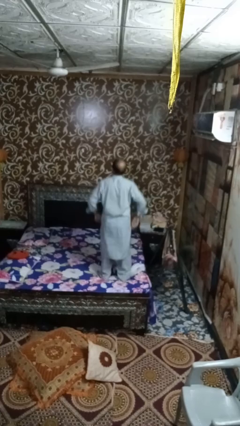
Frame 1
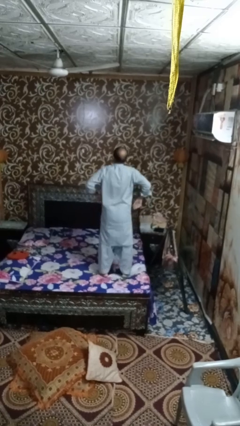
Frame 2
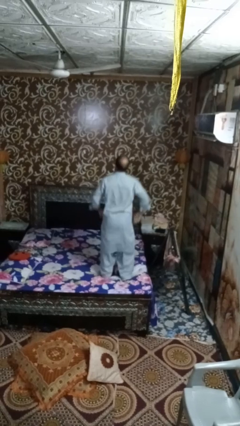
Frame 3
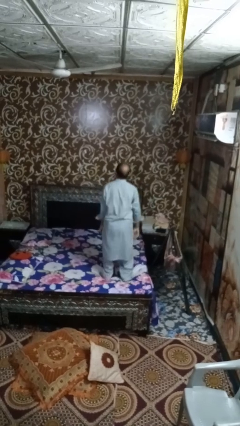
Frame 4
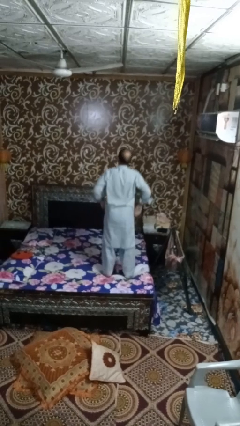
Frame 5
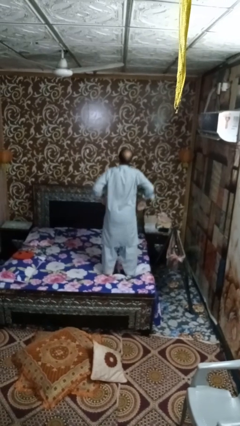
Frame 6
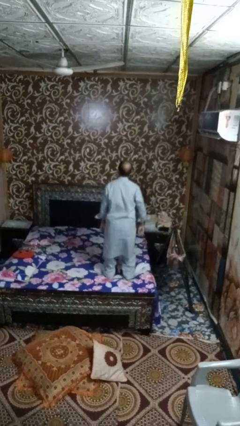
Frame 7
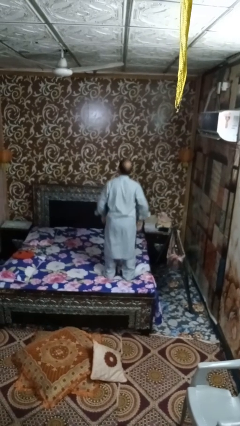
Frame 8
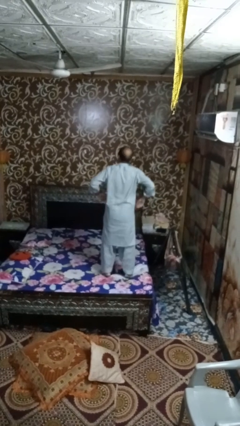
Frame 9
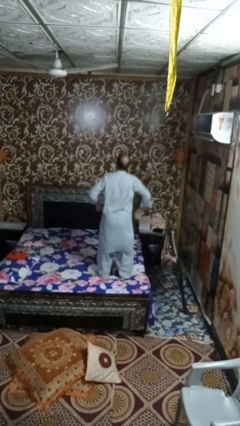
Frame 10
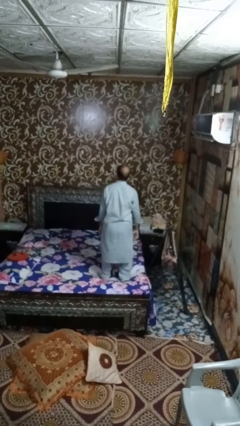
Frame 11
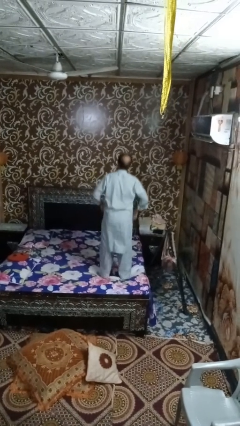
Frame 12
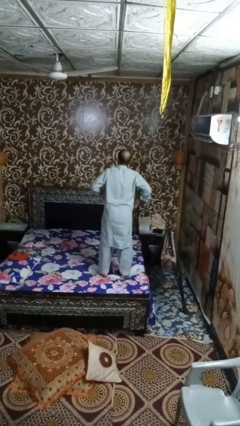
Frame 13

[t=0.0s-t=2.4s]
person jumps on bed

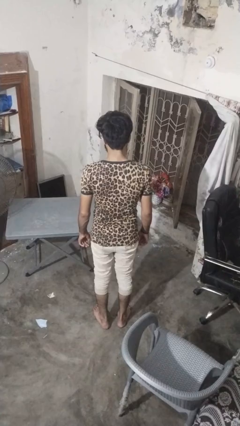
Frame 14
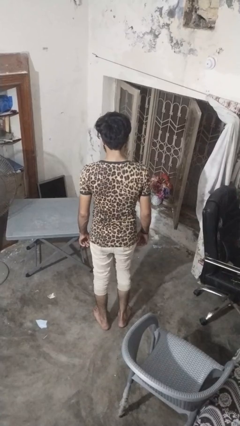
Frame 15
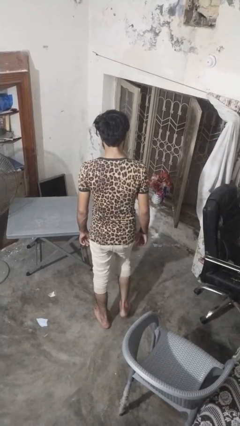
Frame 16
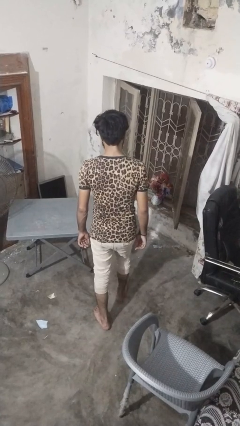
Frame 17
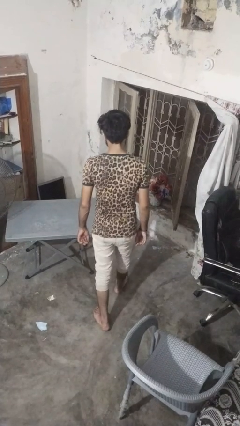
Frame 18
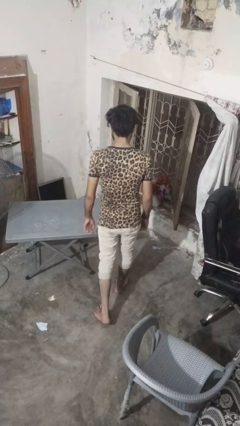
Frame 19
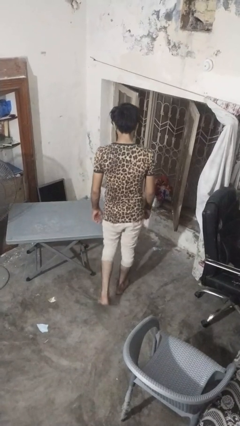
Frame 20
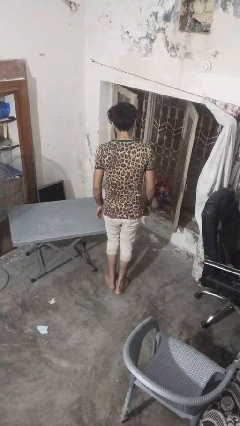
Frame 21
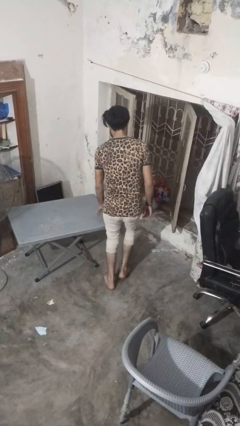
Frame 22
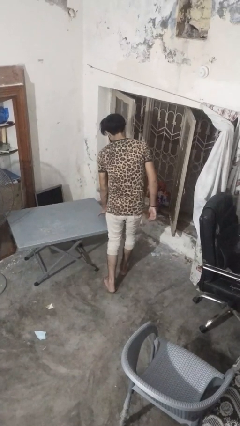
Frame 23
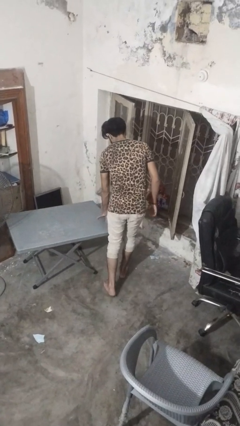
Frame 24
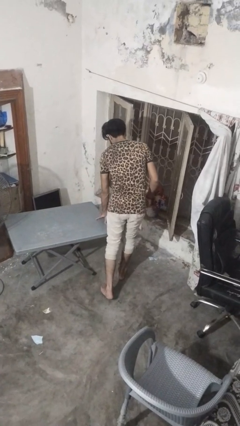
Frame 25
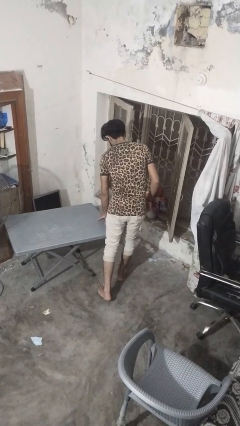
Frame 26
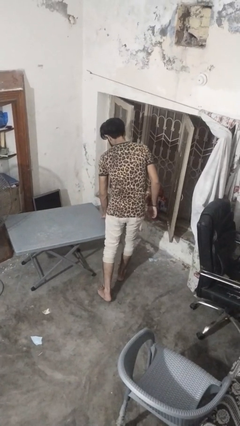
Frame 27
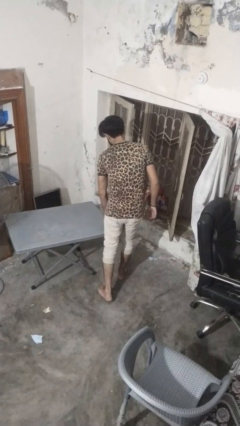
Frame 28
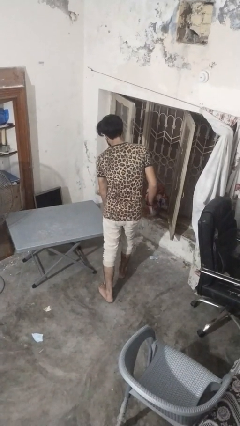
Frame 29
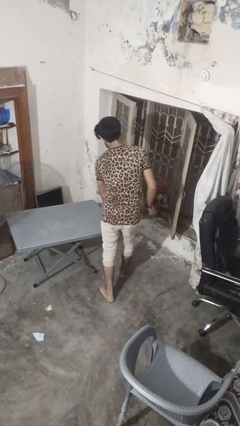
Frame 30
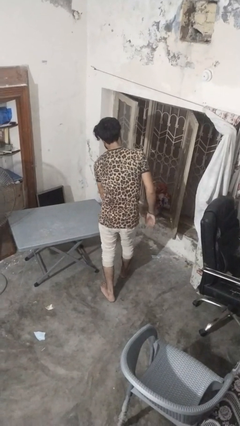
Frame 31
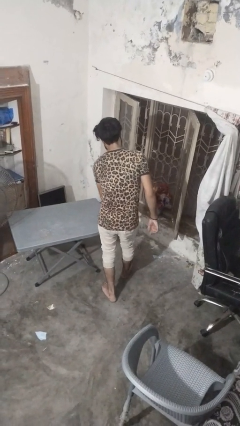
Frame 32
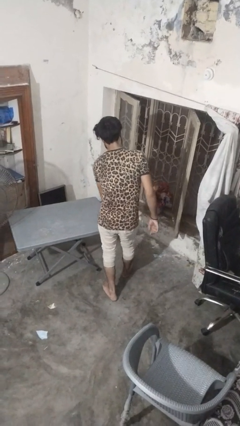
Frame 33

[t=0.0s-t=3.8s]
person bumps into table

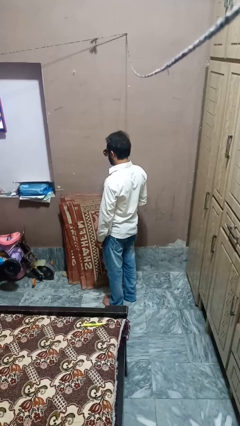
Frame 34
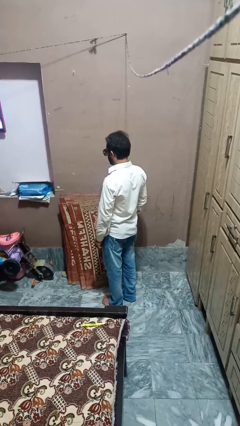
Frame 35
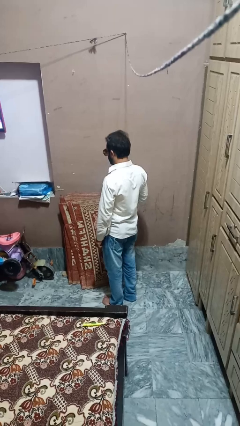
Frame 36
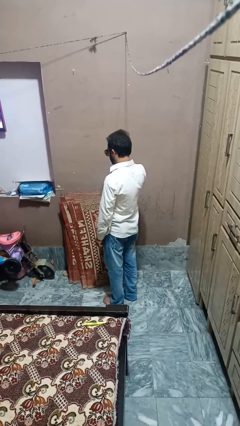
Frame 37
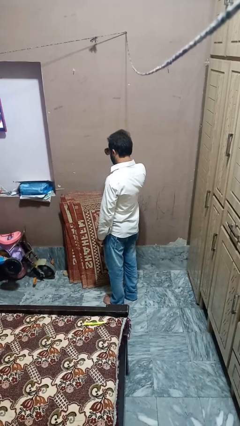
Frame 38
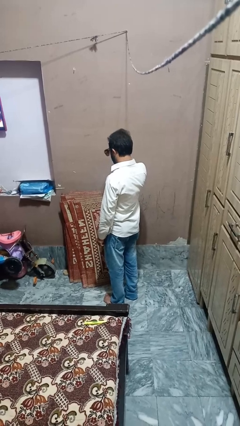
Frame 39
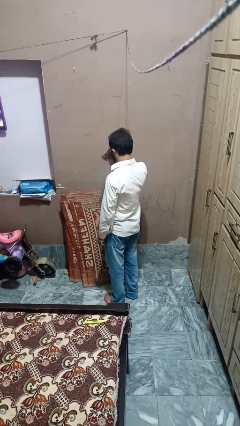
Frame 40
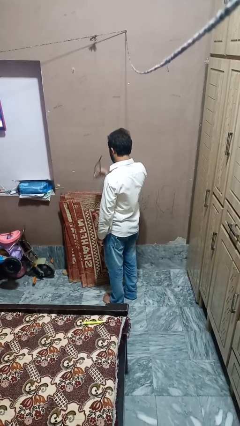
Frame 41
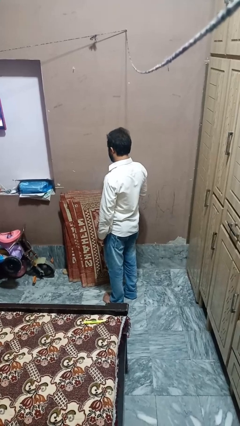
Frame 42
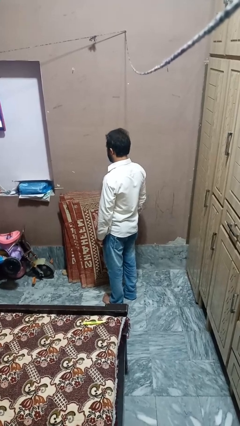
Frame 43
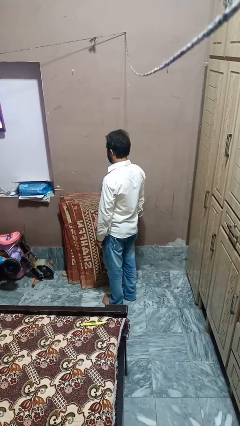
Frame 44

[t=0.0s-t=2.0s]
person takes off sunglasses

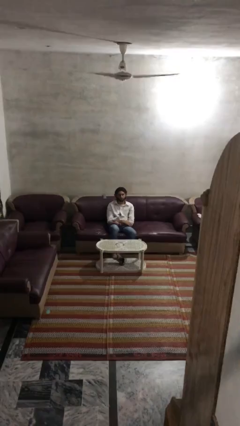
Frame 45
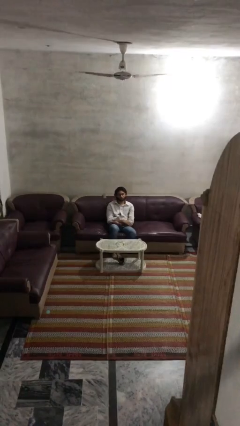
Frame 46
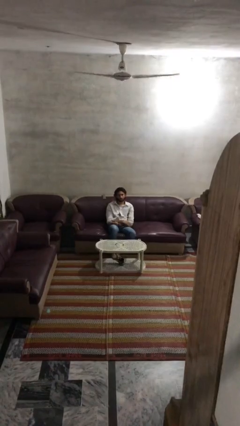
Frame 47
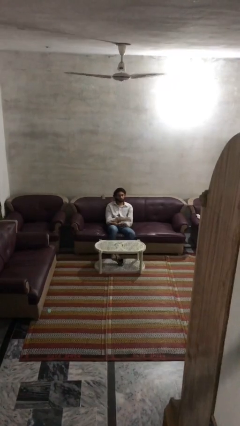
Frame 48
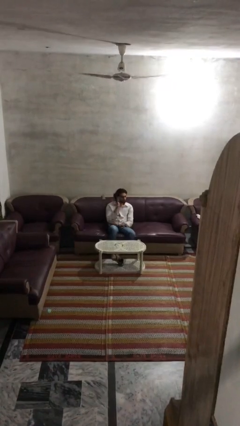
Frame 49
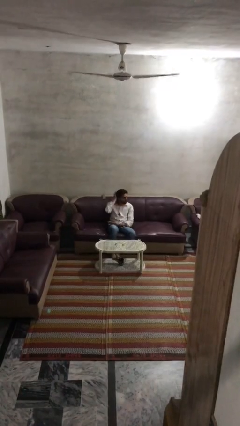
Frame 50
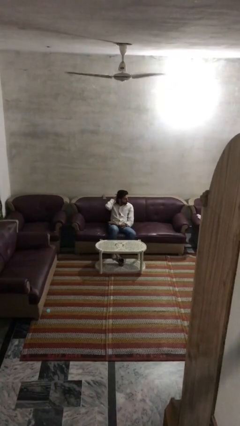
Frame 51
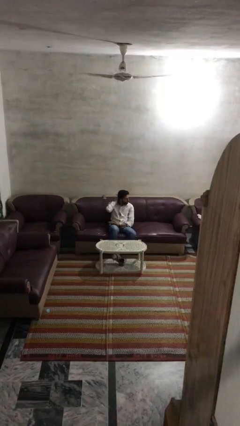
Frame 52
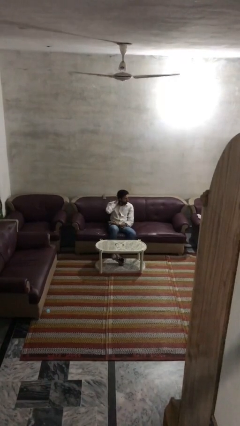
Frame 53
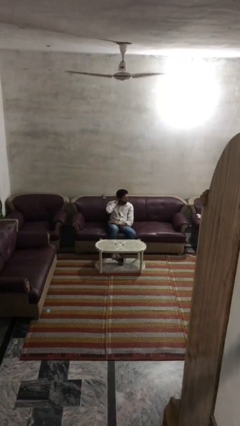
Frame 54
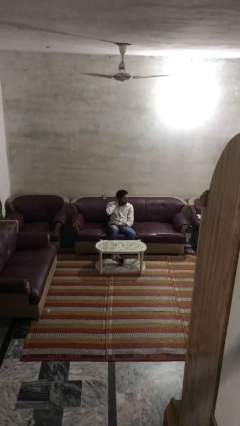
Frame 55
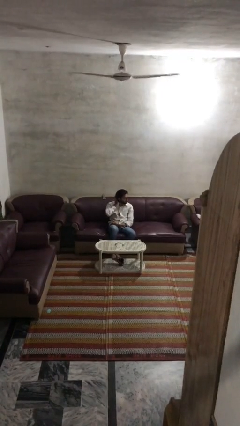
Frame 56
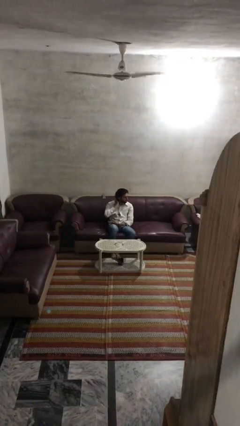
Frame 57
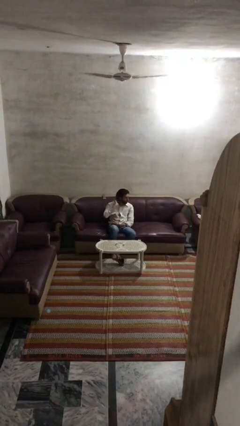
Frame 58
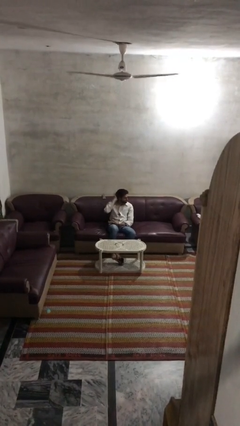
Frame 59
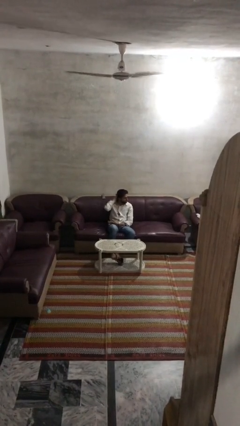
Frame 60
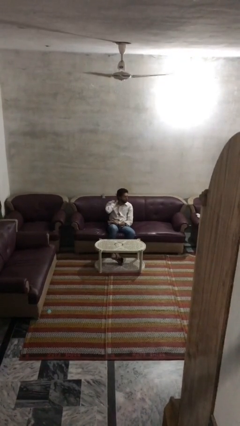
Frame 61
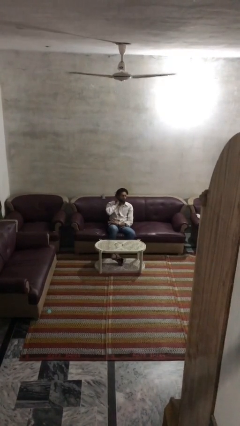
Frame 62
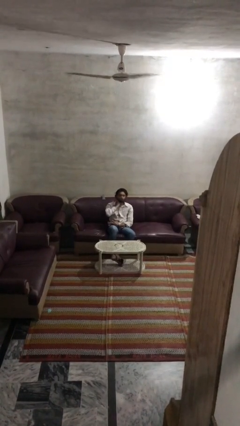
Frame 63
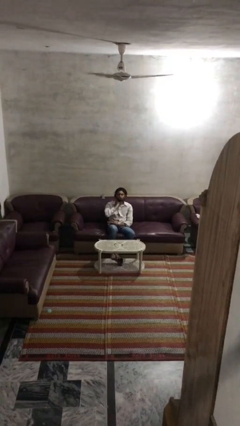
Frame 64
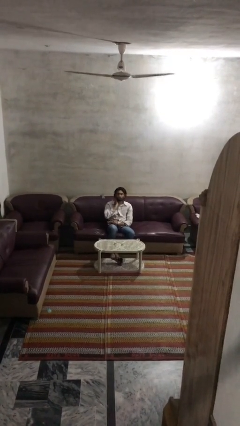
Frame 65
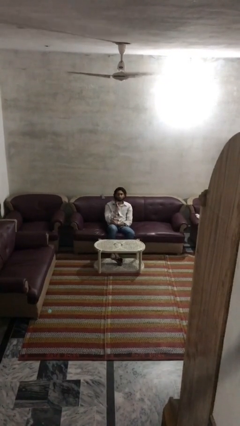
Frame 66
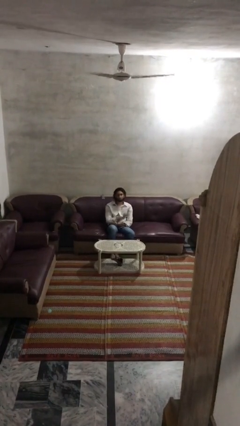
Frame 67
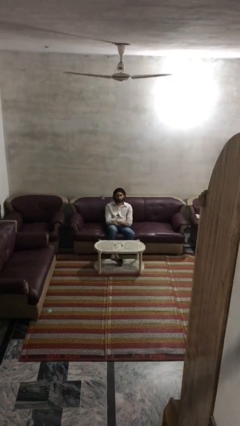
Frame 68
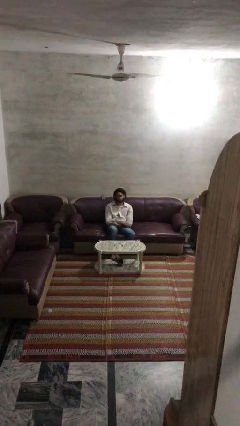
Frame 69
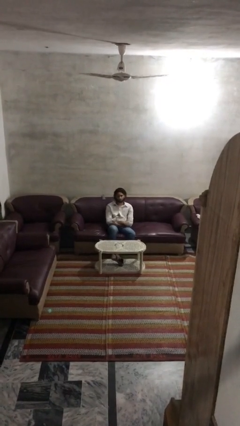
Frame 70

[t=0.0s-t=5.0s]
person strokes hair

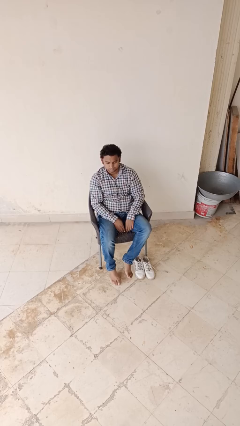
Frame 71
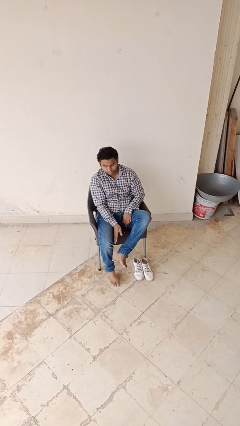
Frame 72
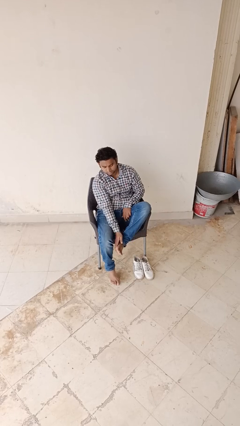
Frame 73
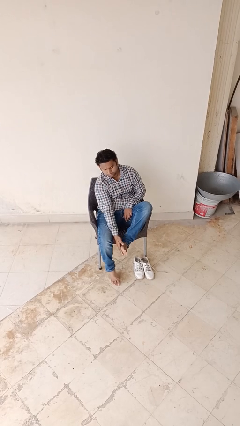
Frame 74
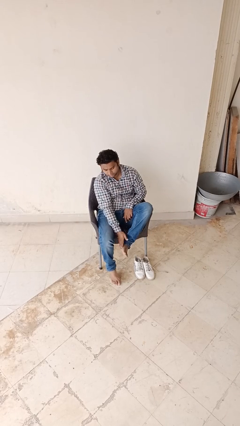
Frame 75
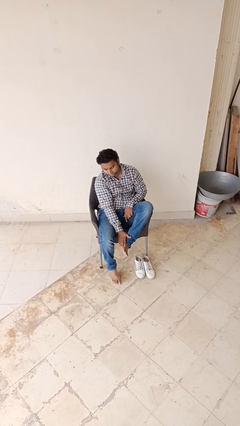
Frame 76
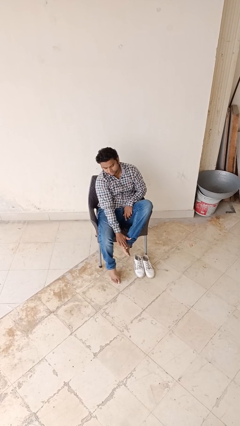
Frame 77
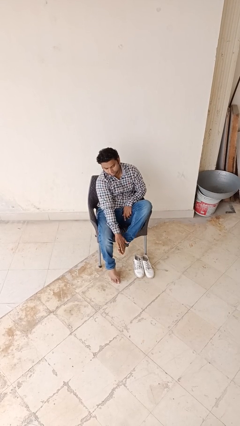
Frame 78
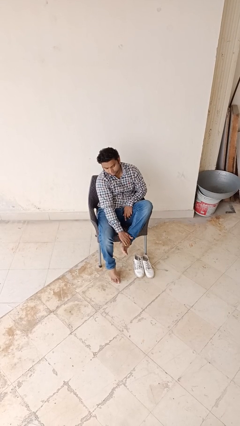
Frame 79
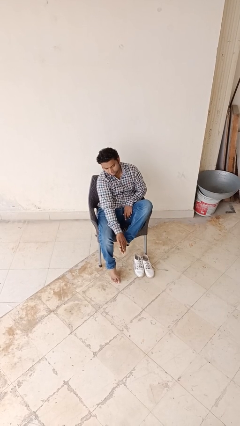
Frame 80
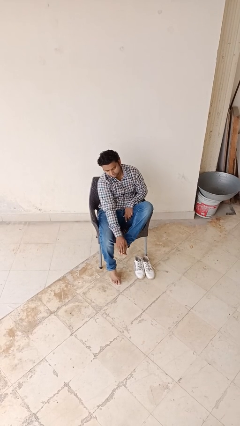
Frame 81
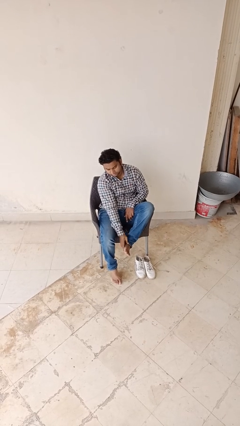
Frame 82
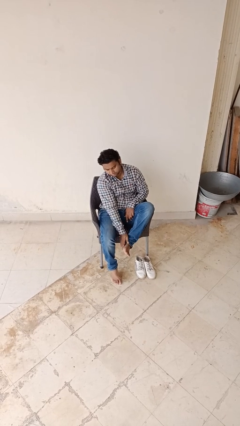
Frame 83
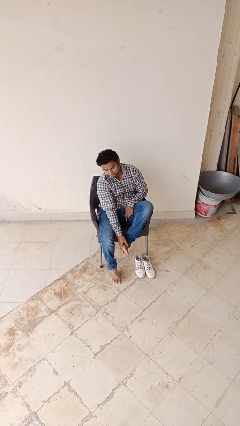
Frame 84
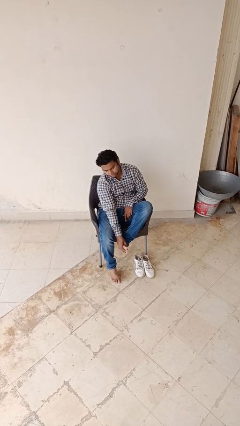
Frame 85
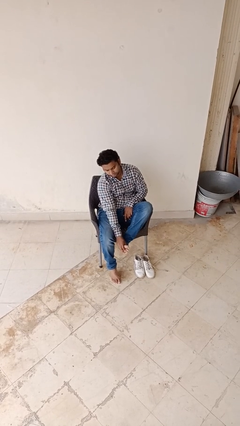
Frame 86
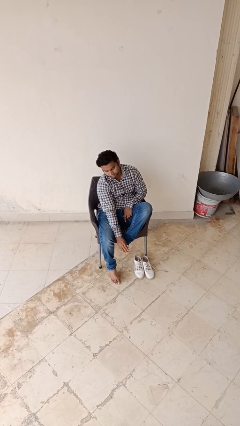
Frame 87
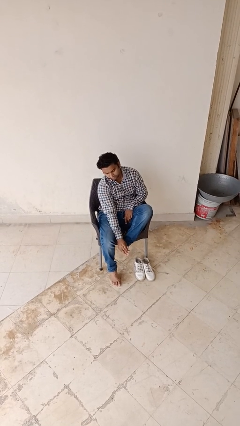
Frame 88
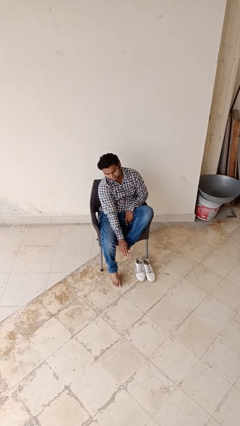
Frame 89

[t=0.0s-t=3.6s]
person rubs foot

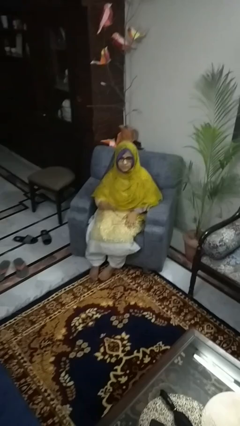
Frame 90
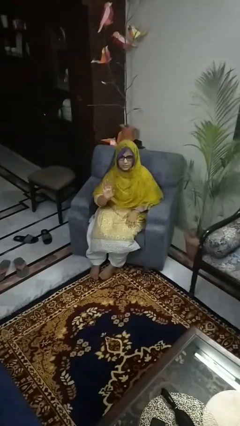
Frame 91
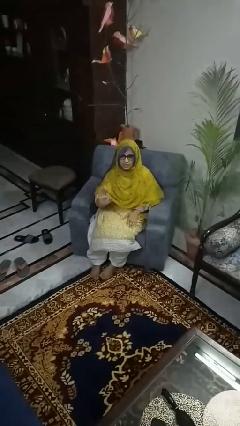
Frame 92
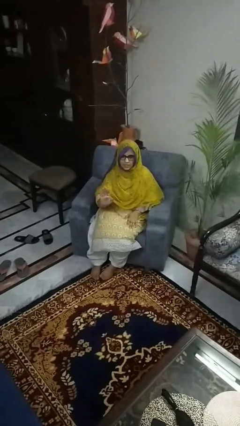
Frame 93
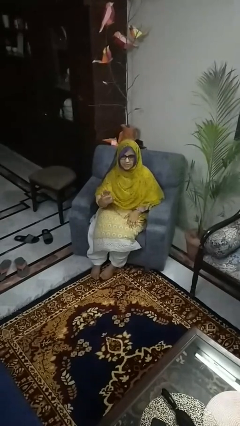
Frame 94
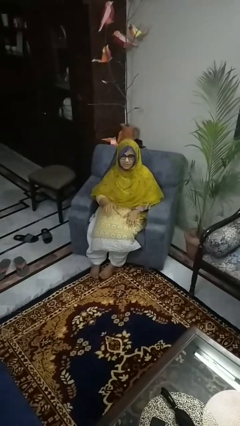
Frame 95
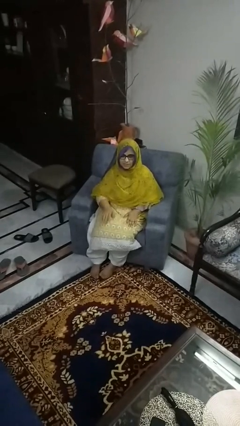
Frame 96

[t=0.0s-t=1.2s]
person gestures stop
